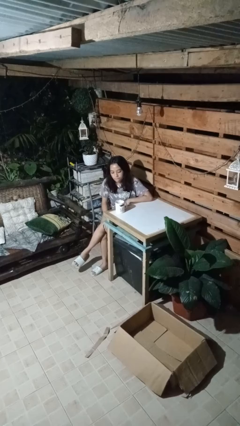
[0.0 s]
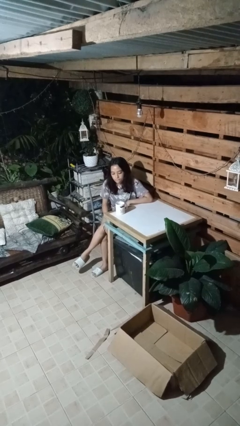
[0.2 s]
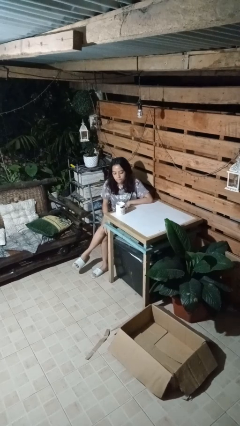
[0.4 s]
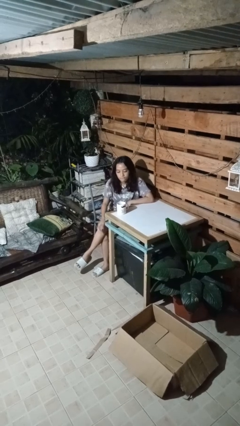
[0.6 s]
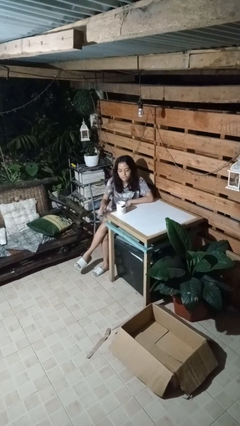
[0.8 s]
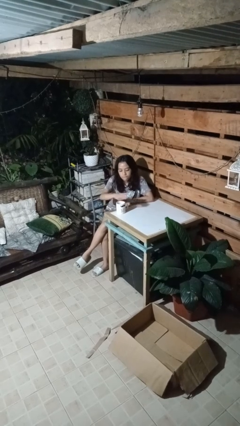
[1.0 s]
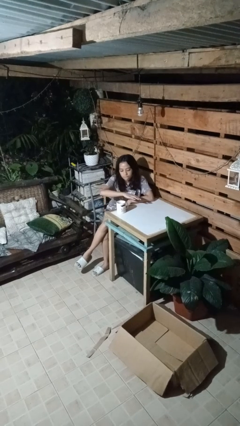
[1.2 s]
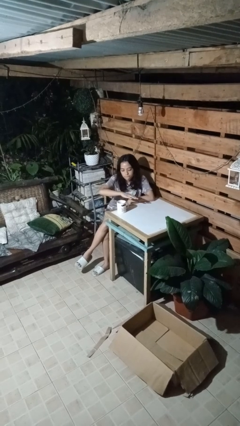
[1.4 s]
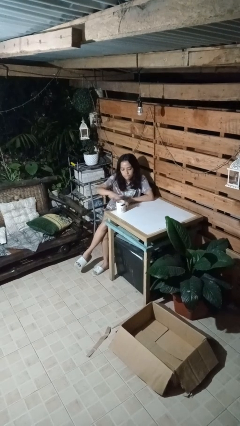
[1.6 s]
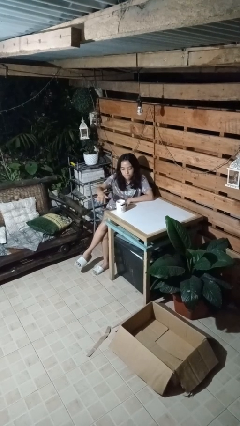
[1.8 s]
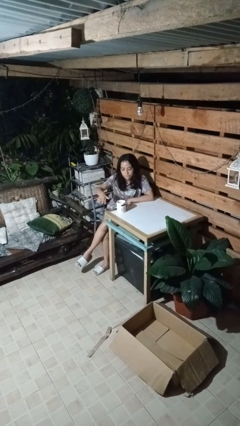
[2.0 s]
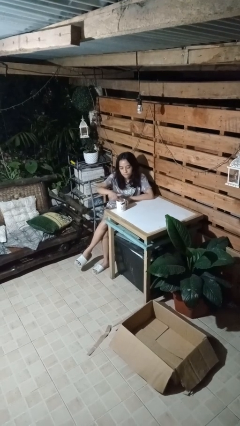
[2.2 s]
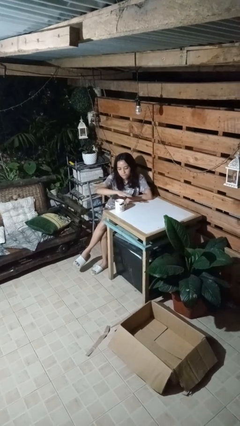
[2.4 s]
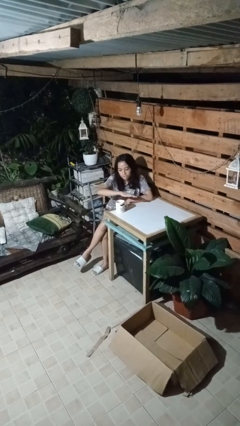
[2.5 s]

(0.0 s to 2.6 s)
person waves hand over object

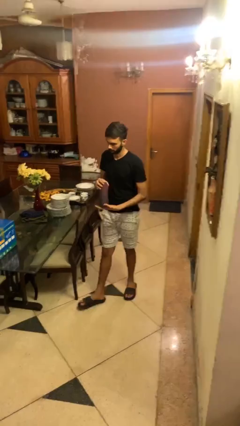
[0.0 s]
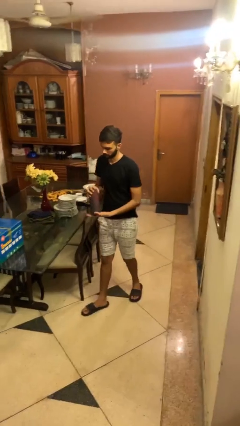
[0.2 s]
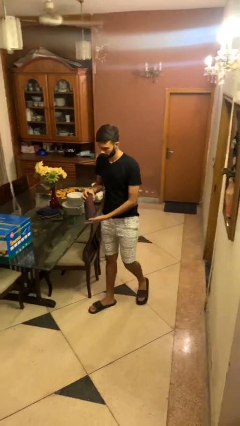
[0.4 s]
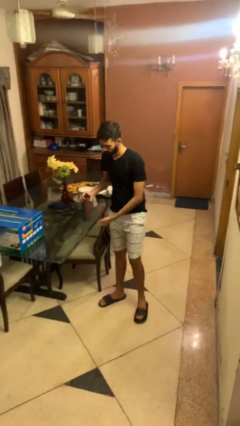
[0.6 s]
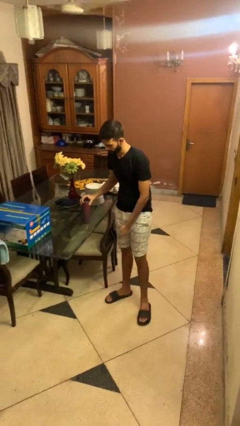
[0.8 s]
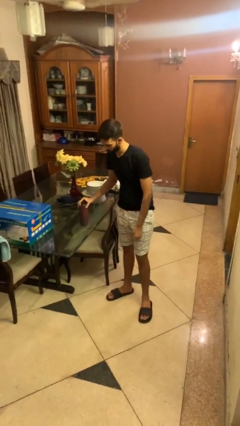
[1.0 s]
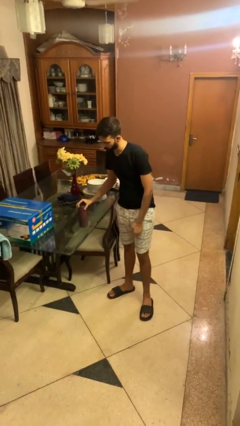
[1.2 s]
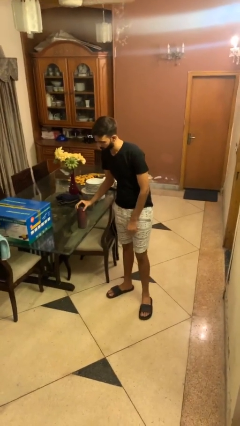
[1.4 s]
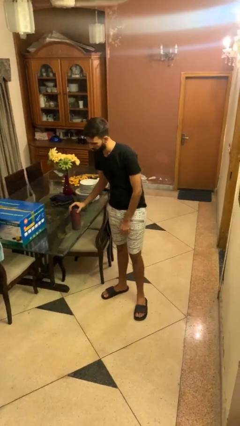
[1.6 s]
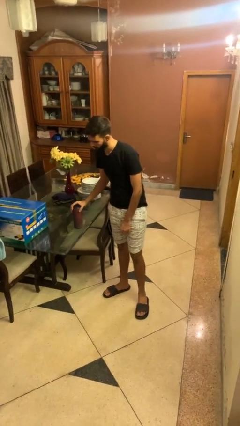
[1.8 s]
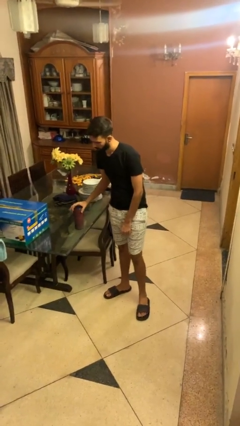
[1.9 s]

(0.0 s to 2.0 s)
person puts down object on table

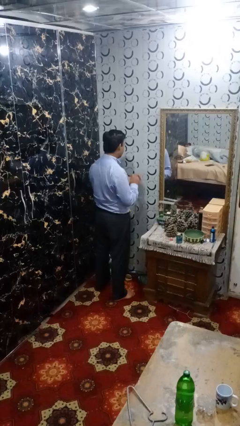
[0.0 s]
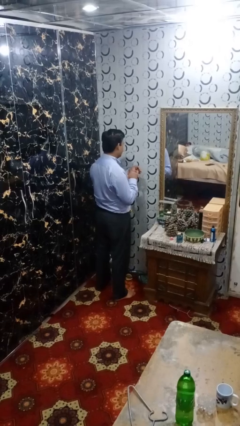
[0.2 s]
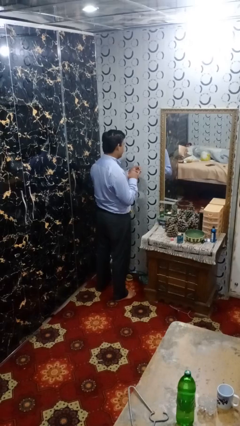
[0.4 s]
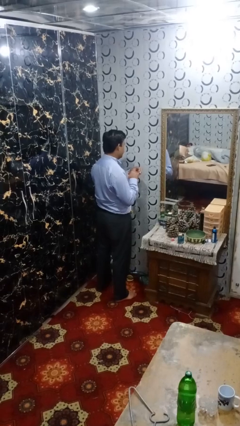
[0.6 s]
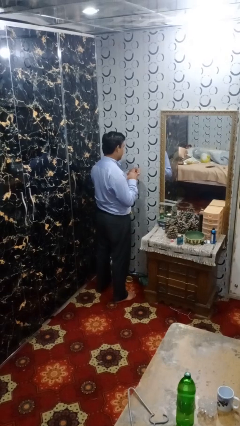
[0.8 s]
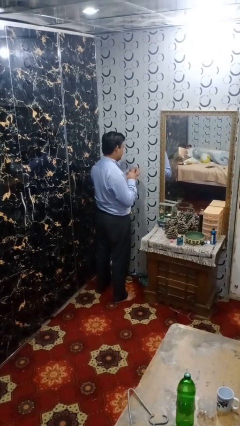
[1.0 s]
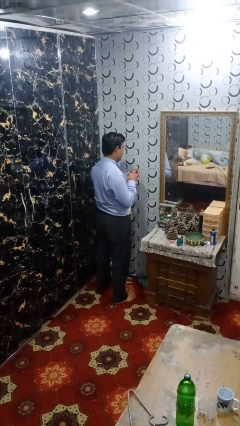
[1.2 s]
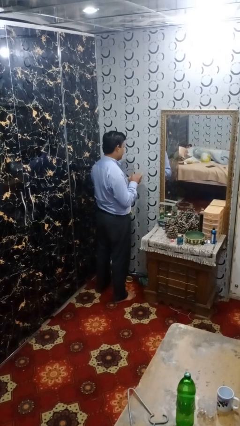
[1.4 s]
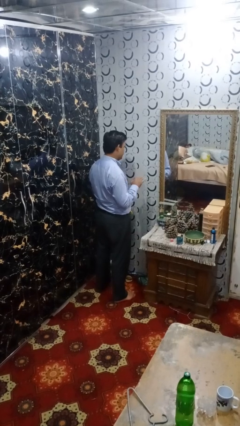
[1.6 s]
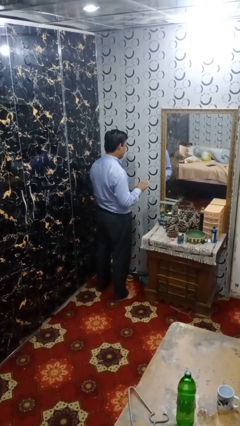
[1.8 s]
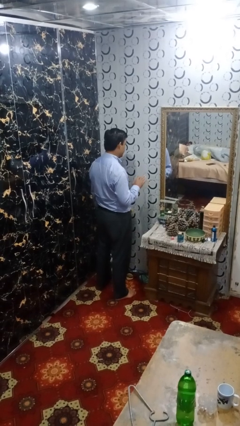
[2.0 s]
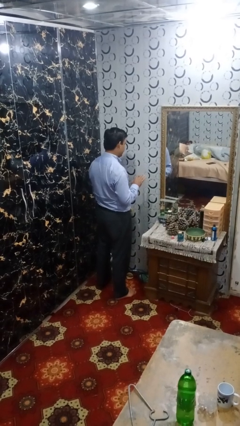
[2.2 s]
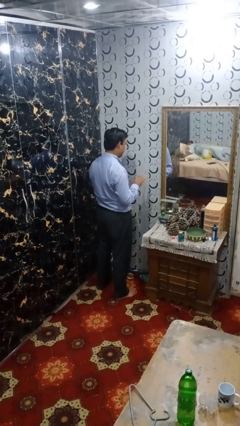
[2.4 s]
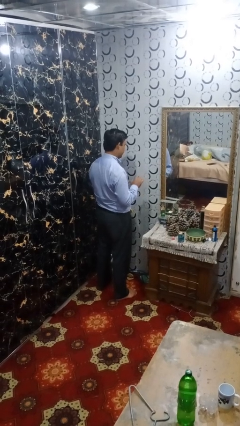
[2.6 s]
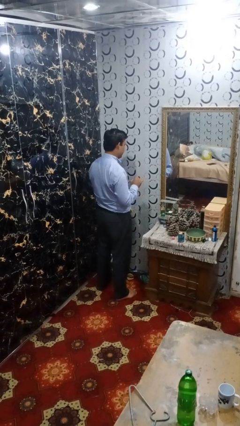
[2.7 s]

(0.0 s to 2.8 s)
person puts on ring

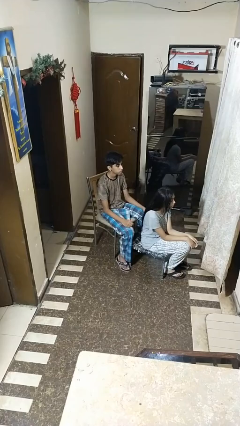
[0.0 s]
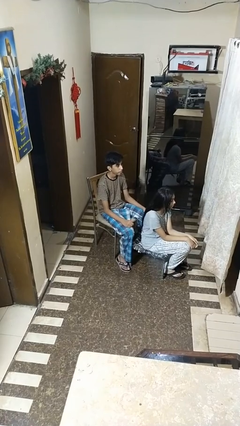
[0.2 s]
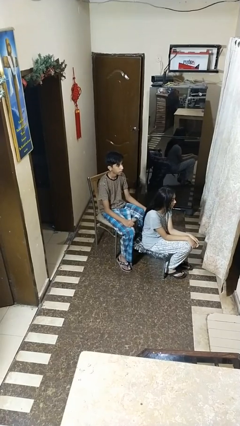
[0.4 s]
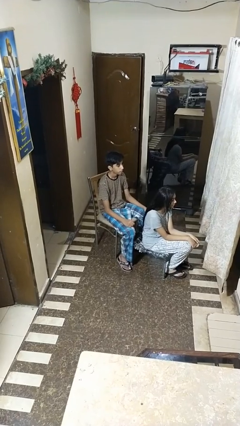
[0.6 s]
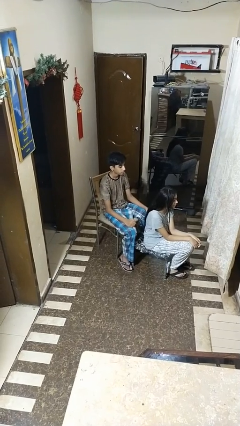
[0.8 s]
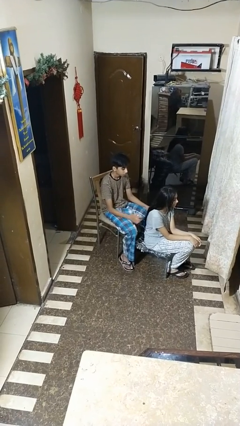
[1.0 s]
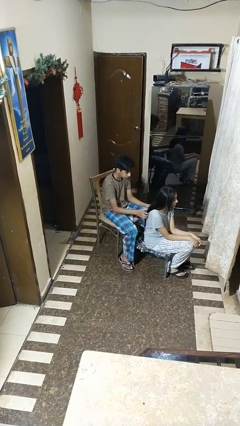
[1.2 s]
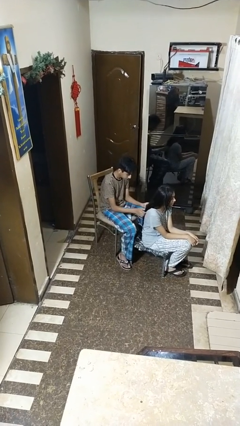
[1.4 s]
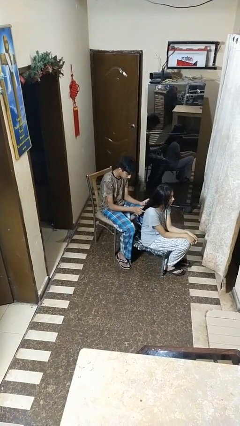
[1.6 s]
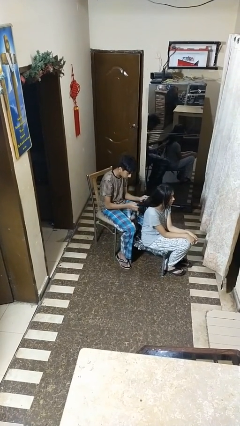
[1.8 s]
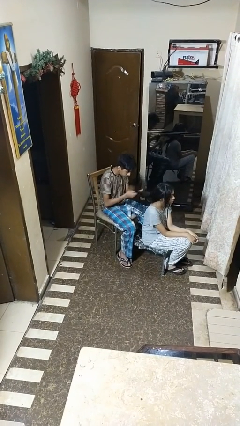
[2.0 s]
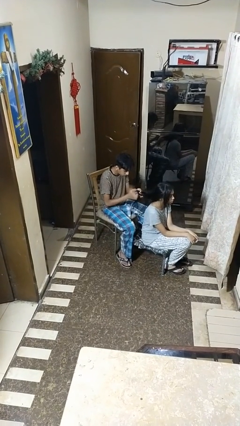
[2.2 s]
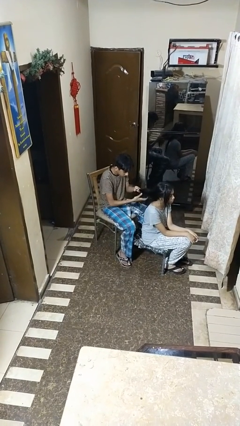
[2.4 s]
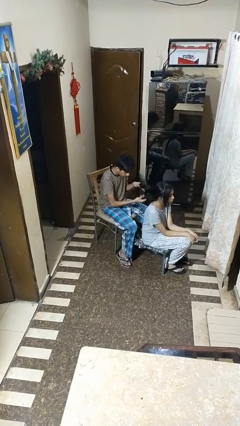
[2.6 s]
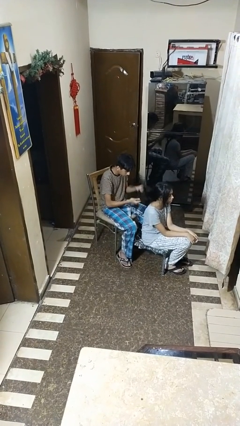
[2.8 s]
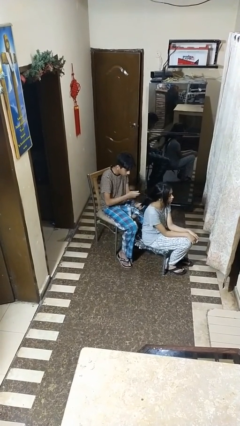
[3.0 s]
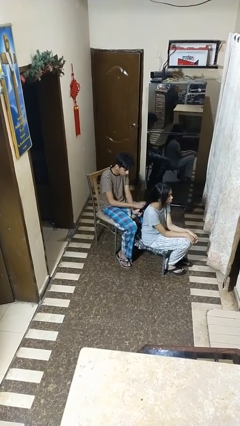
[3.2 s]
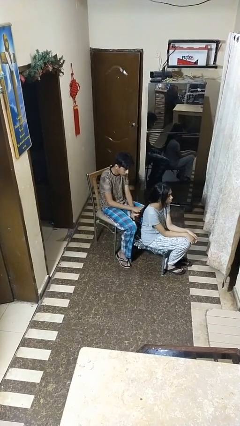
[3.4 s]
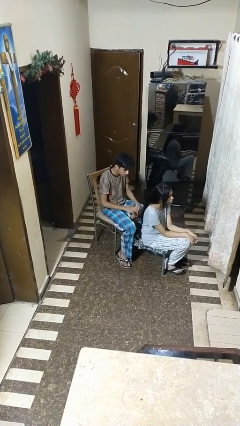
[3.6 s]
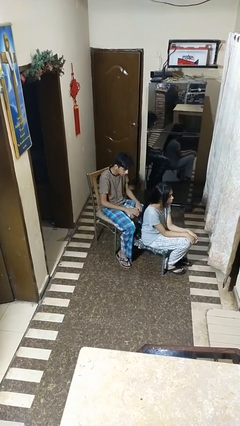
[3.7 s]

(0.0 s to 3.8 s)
person braids hair of person

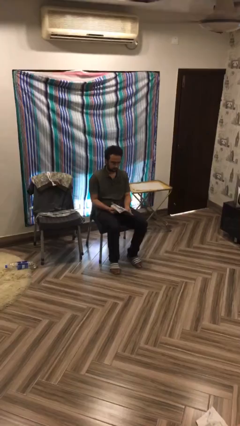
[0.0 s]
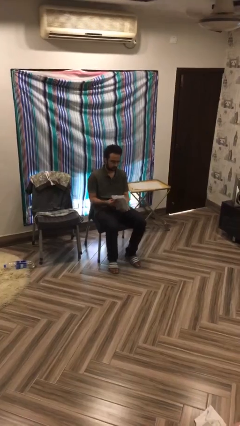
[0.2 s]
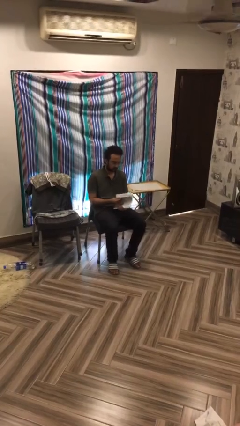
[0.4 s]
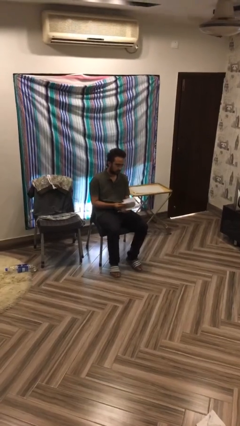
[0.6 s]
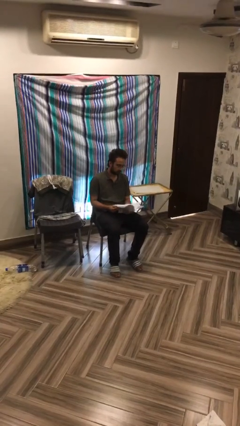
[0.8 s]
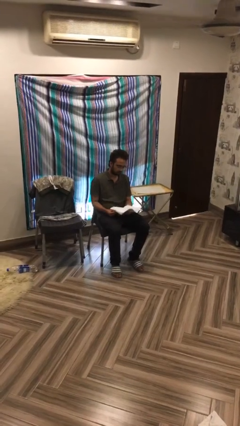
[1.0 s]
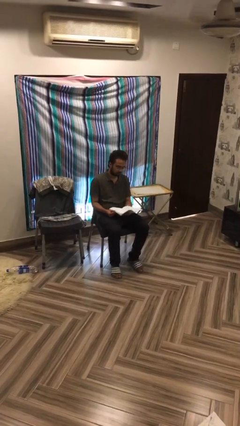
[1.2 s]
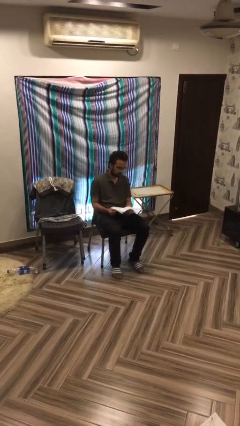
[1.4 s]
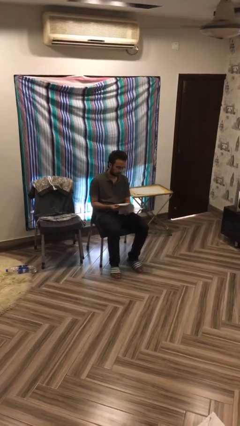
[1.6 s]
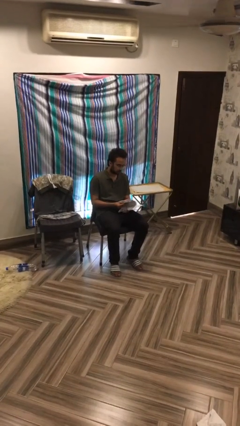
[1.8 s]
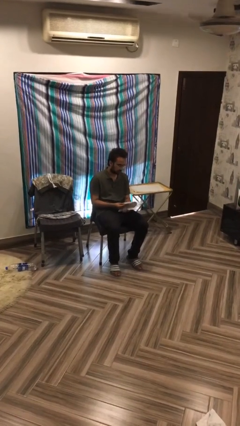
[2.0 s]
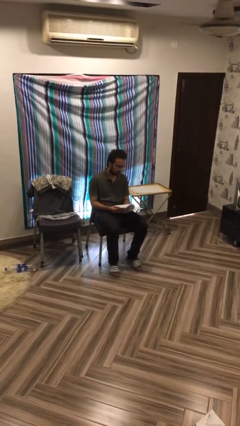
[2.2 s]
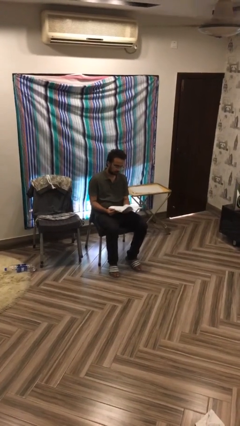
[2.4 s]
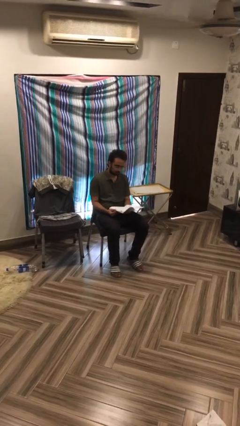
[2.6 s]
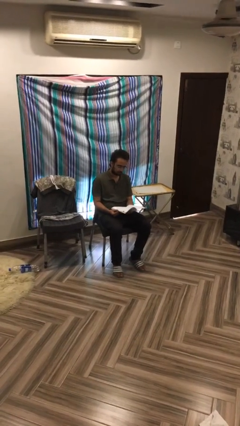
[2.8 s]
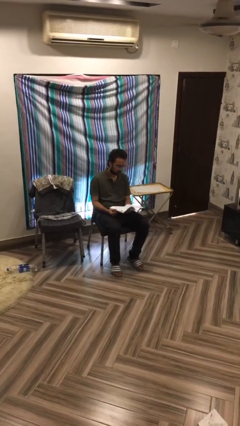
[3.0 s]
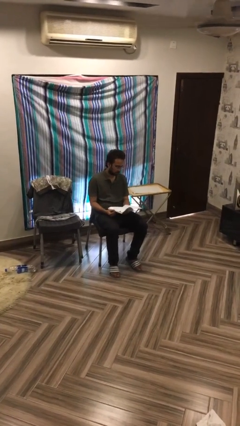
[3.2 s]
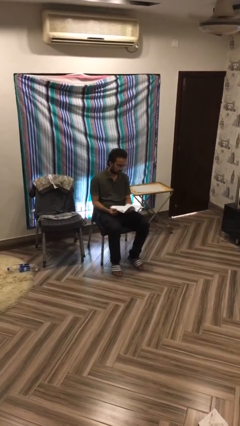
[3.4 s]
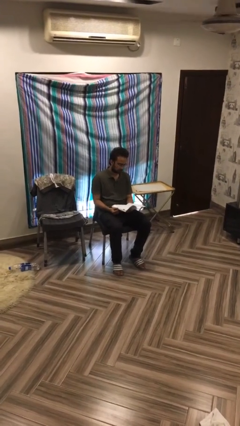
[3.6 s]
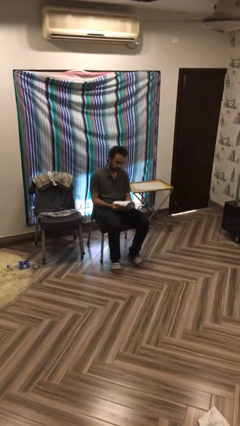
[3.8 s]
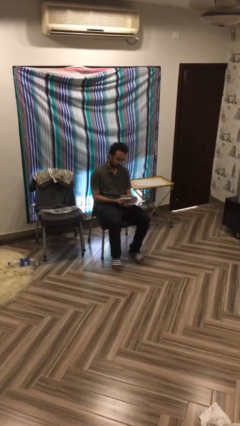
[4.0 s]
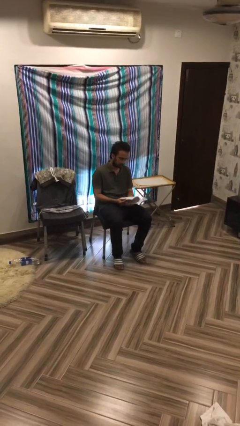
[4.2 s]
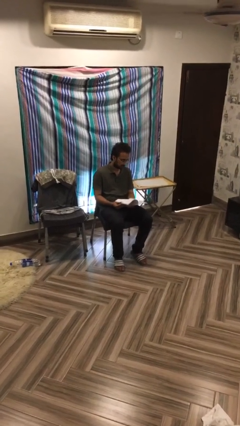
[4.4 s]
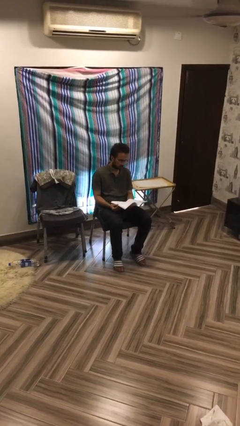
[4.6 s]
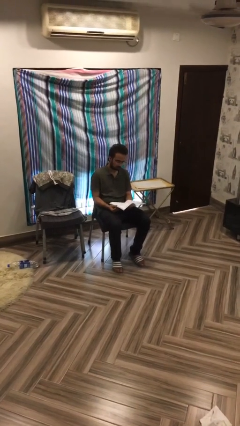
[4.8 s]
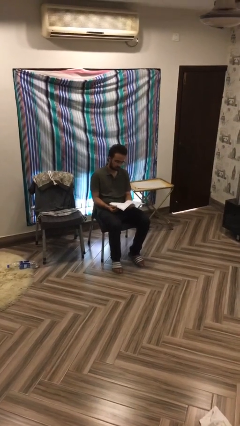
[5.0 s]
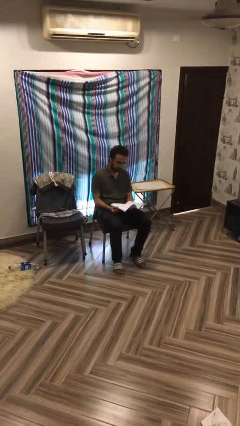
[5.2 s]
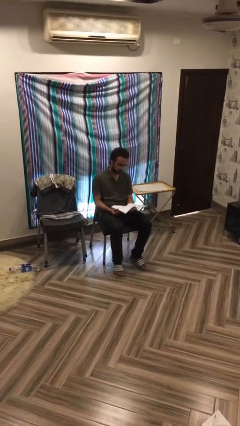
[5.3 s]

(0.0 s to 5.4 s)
person reads document

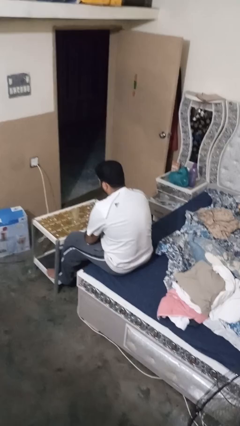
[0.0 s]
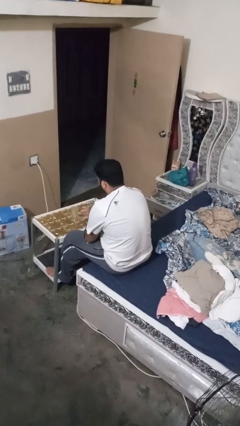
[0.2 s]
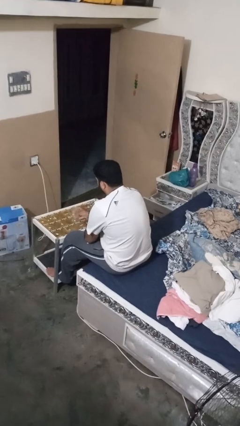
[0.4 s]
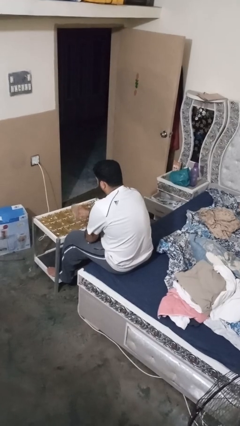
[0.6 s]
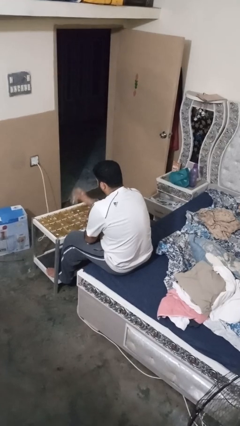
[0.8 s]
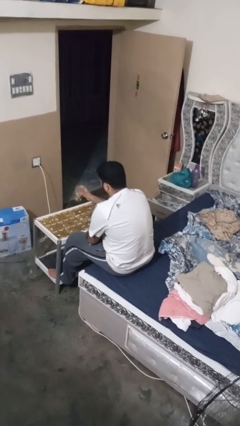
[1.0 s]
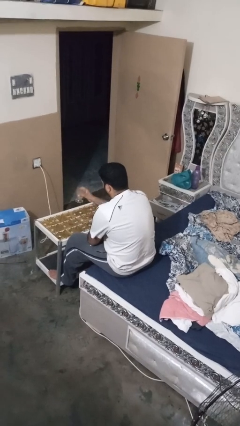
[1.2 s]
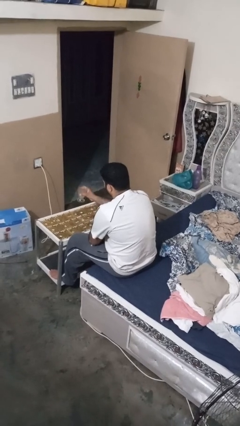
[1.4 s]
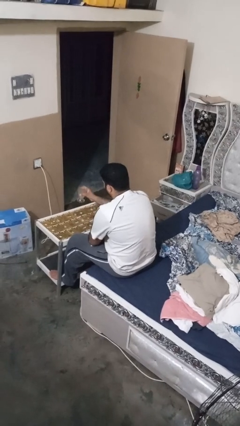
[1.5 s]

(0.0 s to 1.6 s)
person picks up object from table
